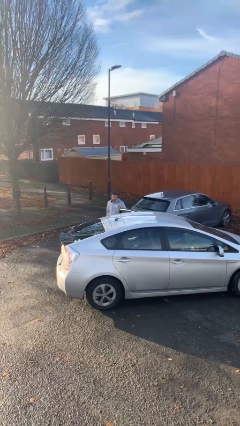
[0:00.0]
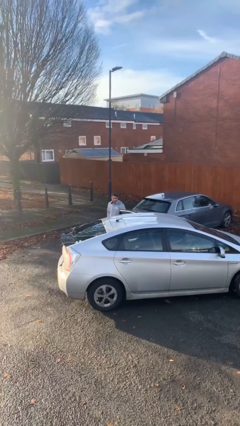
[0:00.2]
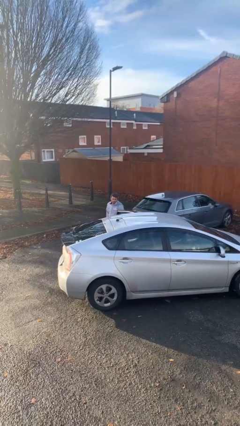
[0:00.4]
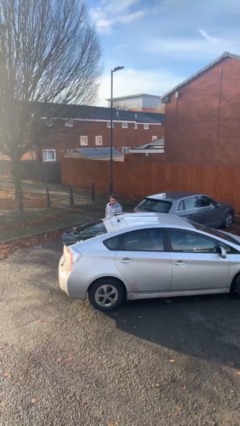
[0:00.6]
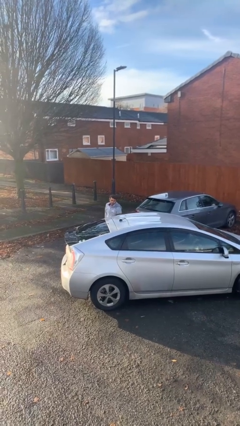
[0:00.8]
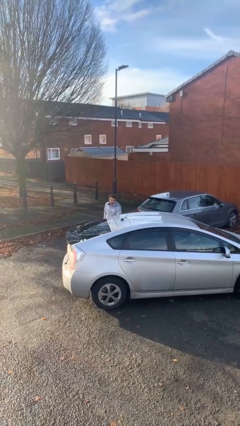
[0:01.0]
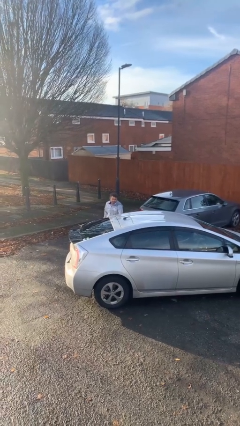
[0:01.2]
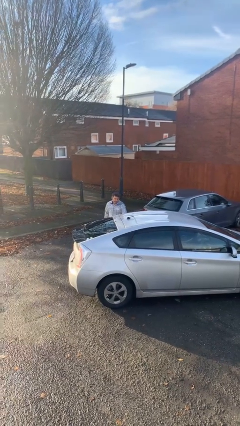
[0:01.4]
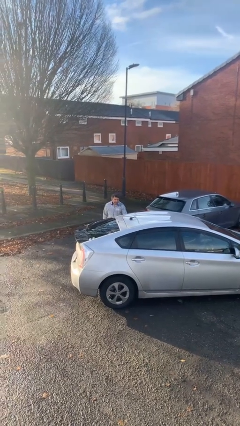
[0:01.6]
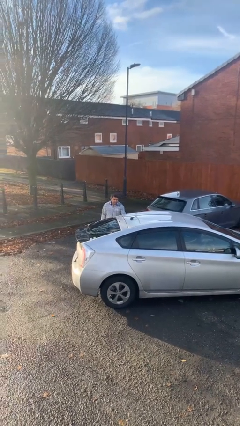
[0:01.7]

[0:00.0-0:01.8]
person closes car door

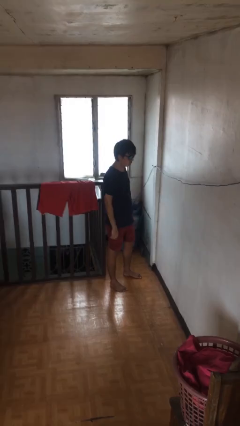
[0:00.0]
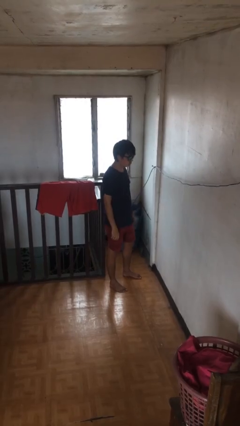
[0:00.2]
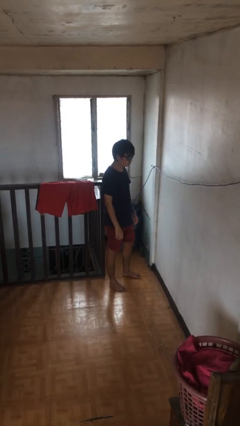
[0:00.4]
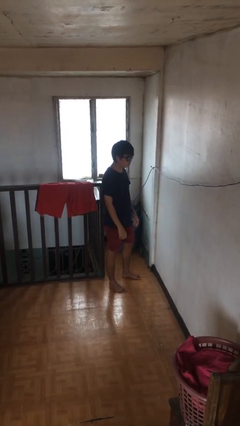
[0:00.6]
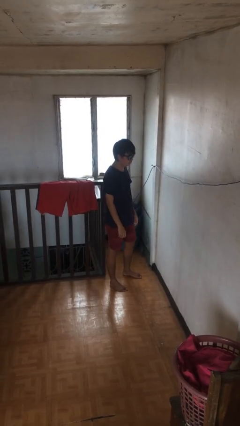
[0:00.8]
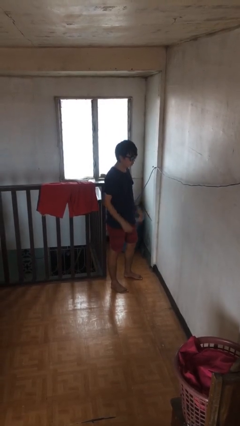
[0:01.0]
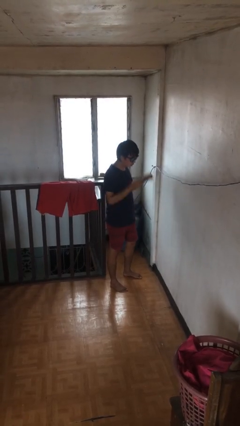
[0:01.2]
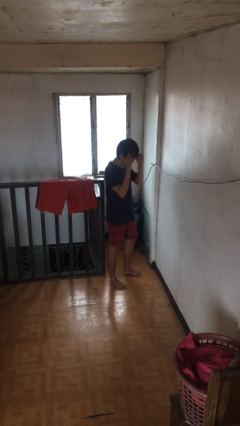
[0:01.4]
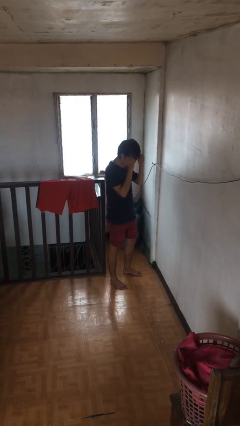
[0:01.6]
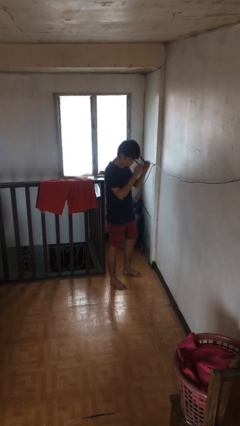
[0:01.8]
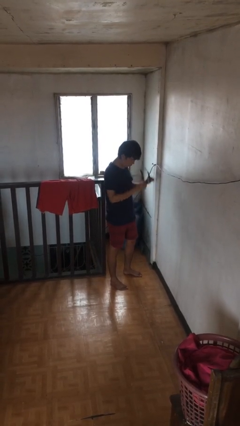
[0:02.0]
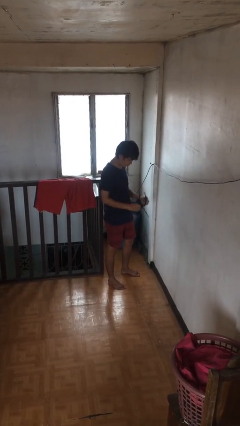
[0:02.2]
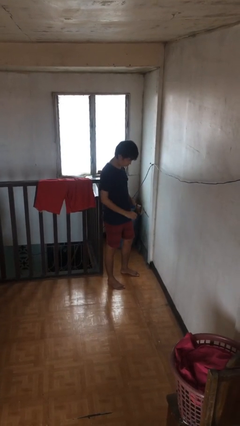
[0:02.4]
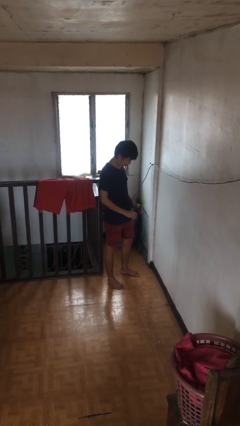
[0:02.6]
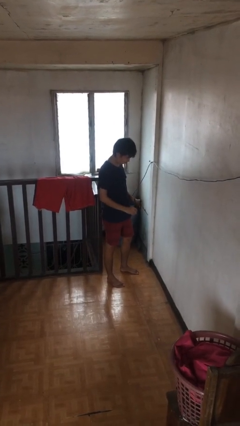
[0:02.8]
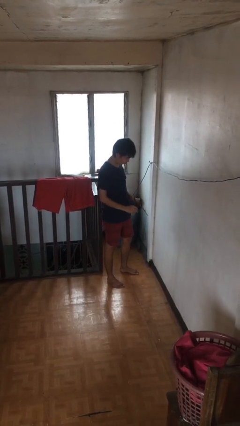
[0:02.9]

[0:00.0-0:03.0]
person takes off sunglasses

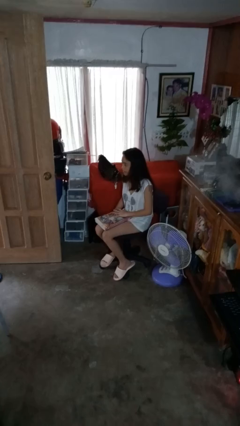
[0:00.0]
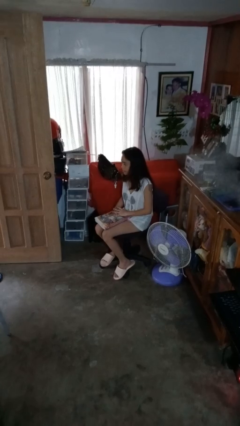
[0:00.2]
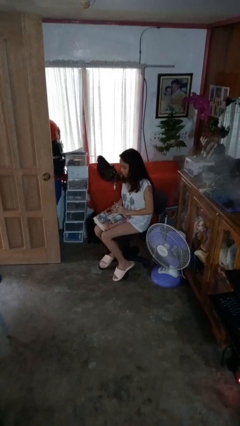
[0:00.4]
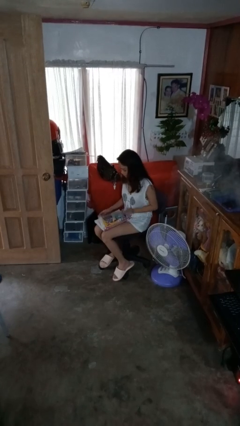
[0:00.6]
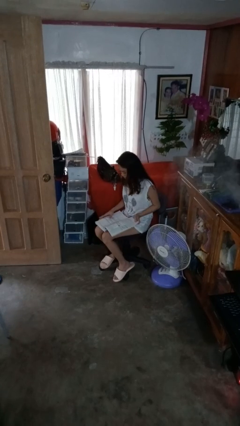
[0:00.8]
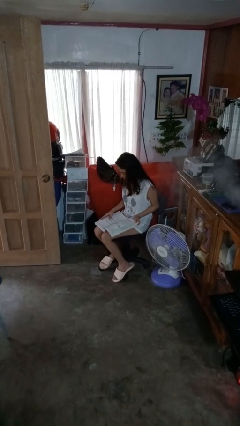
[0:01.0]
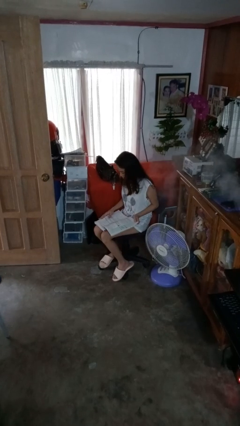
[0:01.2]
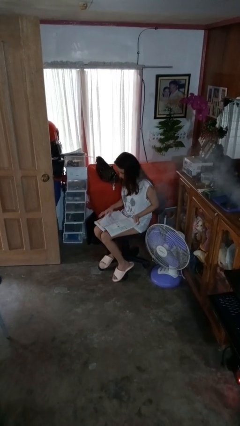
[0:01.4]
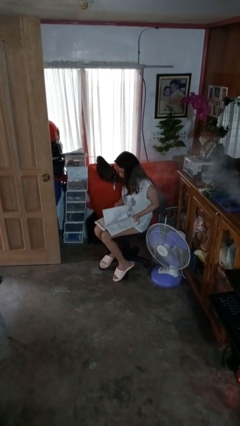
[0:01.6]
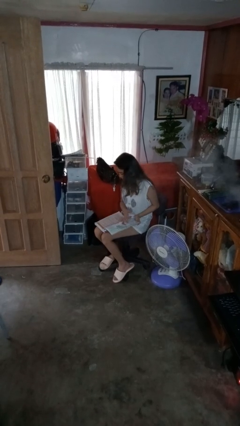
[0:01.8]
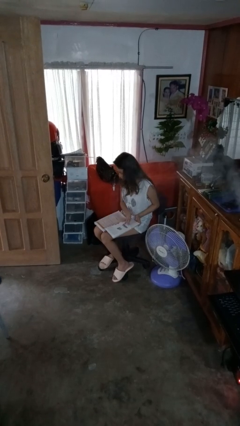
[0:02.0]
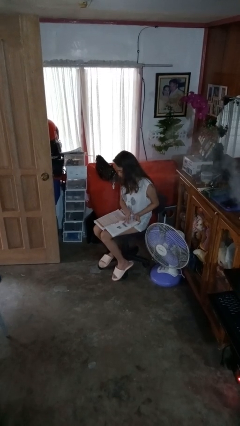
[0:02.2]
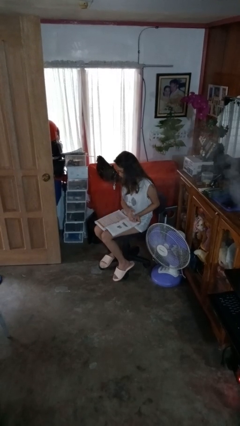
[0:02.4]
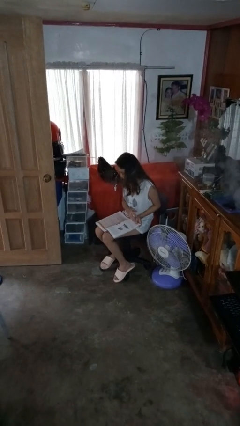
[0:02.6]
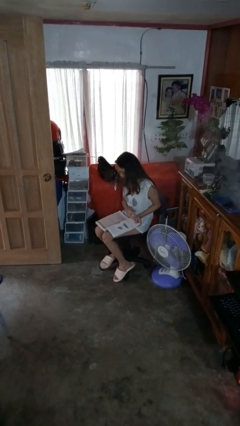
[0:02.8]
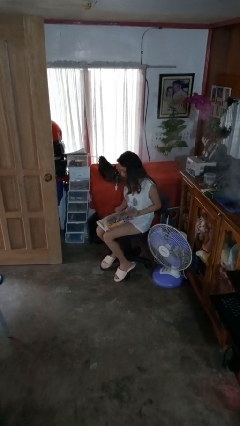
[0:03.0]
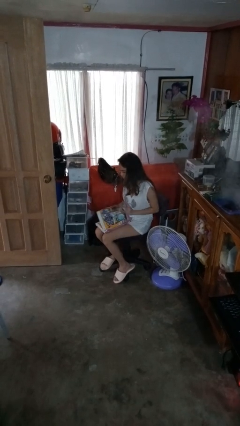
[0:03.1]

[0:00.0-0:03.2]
person reads book

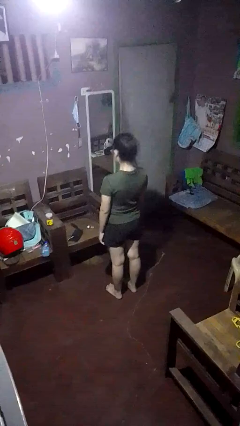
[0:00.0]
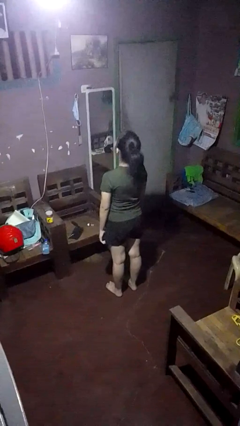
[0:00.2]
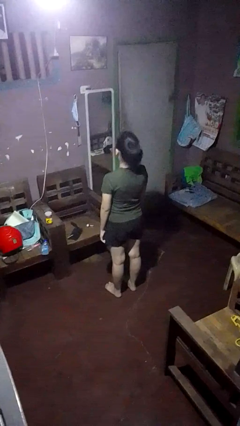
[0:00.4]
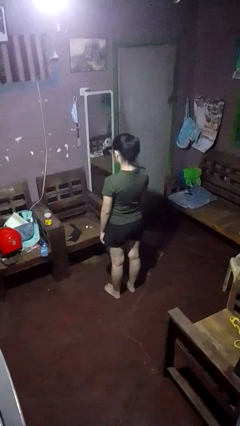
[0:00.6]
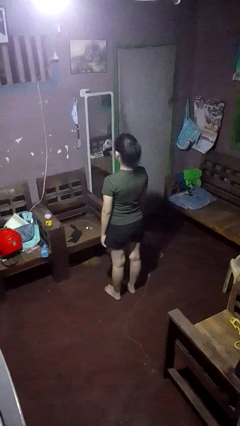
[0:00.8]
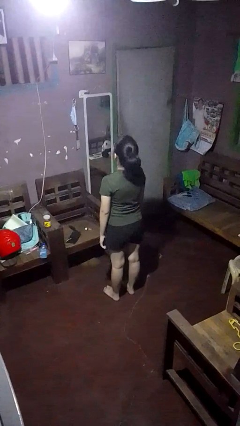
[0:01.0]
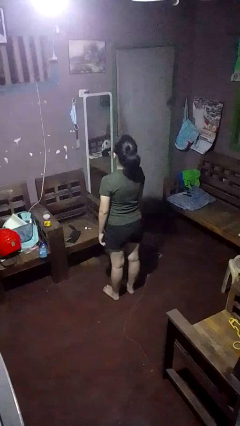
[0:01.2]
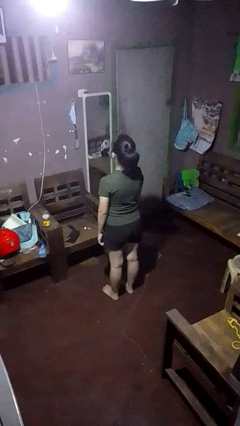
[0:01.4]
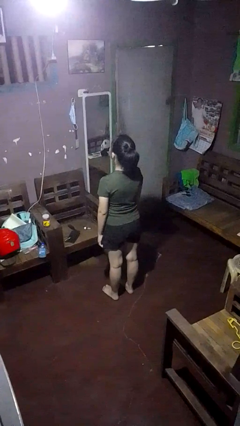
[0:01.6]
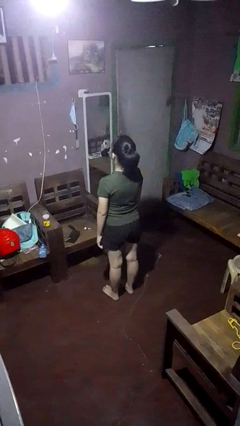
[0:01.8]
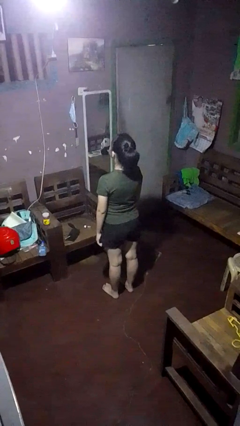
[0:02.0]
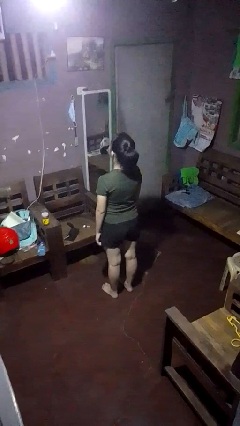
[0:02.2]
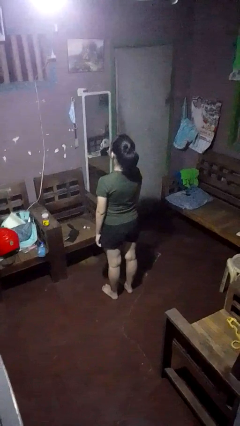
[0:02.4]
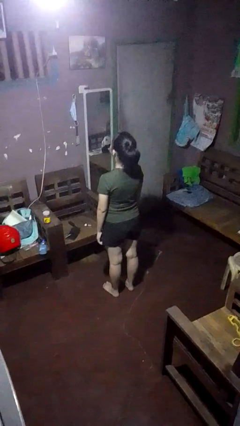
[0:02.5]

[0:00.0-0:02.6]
person nods head

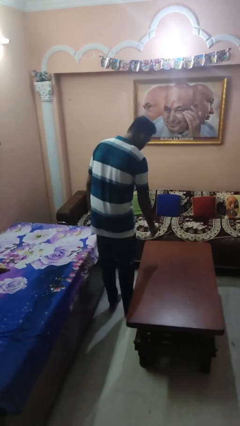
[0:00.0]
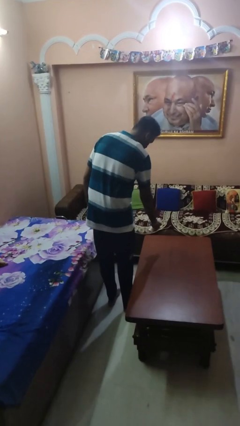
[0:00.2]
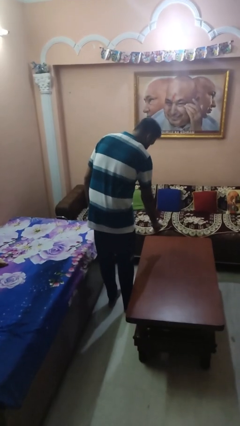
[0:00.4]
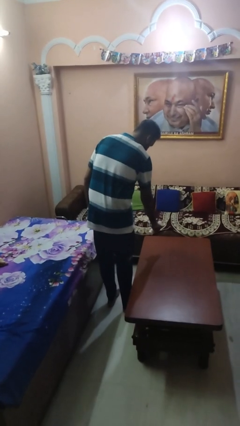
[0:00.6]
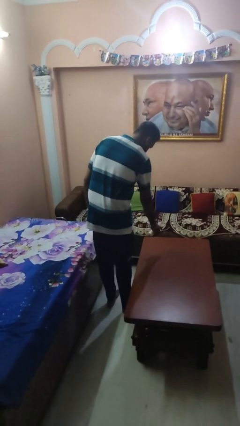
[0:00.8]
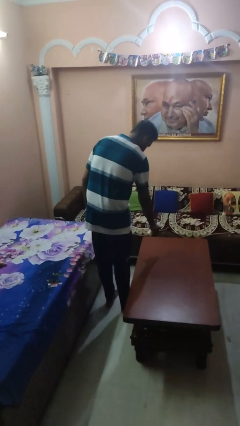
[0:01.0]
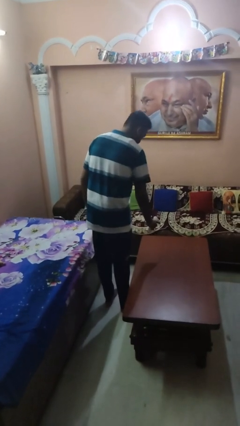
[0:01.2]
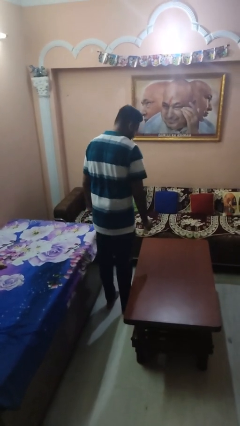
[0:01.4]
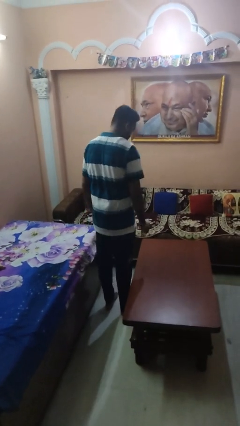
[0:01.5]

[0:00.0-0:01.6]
person sprays from bottle

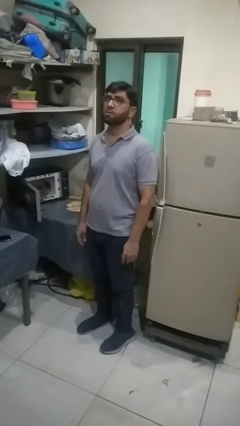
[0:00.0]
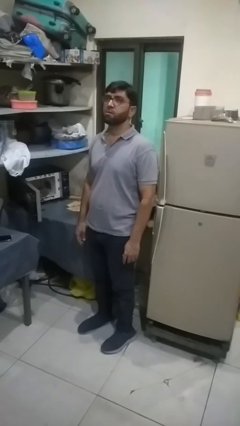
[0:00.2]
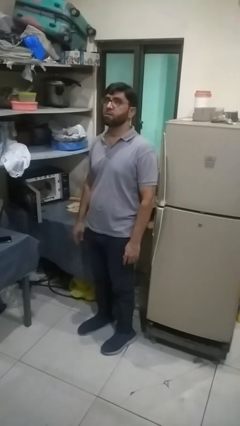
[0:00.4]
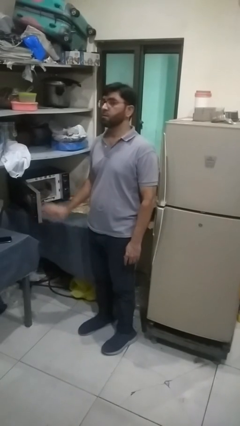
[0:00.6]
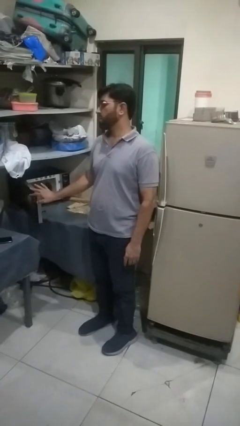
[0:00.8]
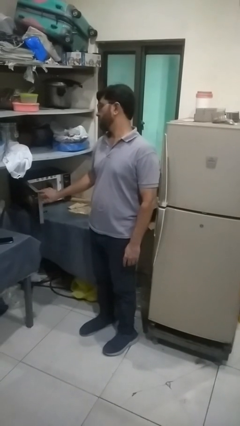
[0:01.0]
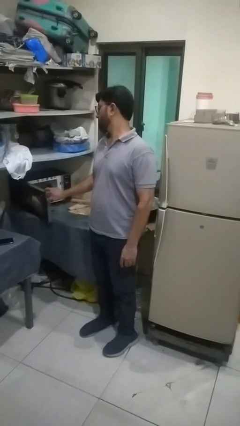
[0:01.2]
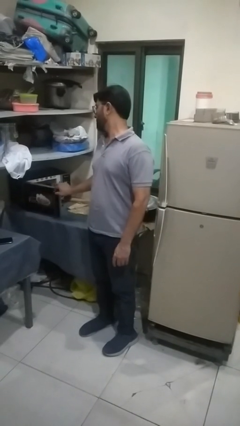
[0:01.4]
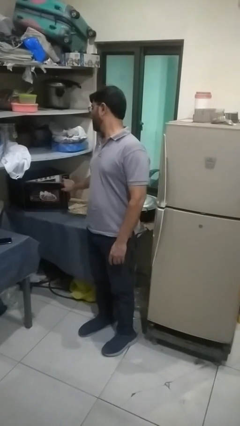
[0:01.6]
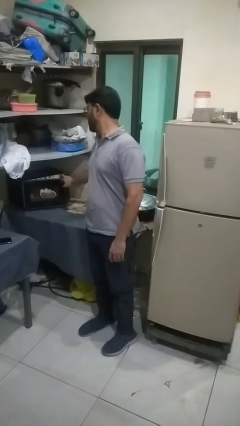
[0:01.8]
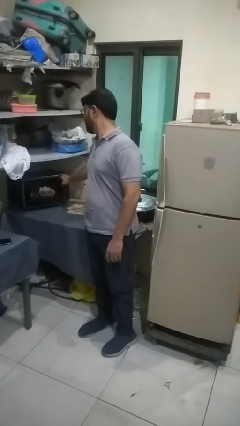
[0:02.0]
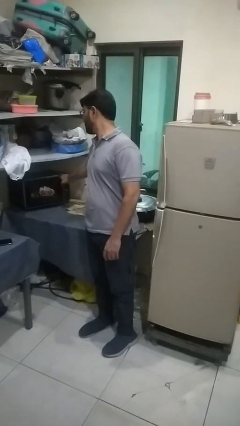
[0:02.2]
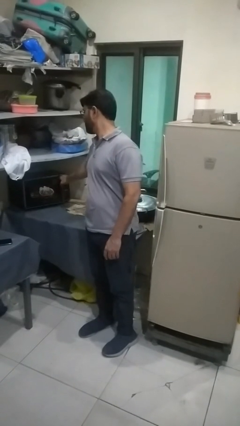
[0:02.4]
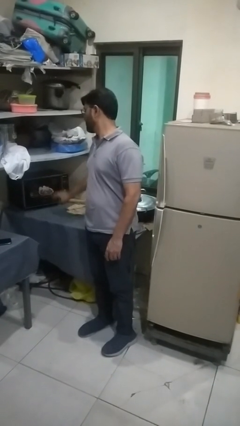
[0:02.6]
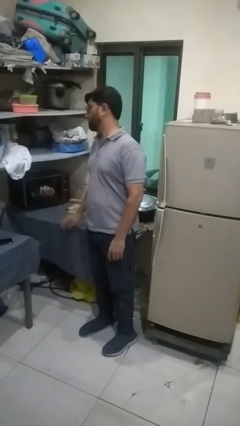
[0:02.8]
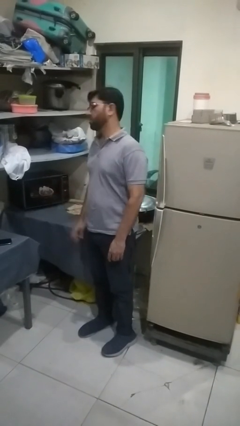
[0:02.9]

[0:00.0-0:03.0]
person closes oven door

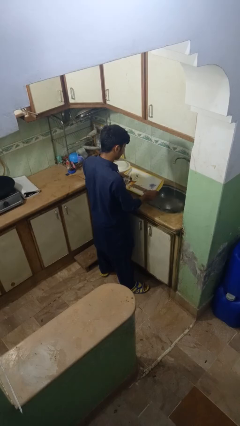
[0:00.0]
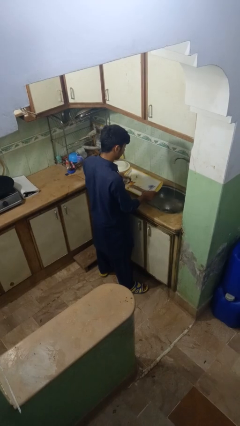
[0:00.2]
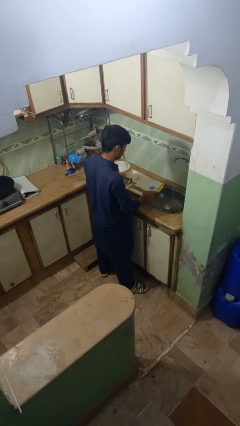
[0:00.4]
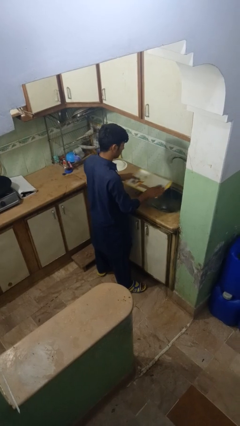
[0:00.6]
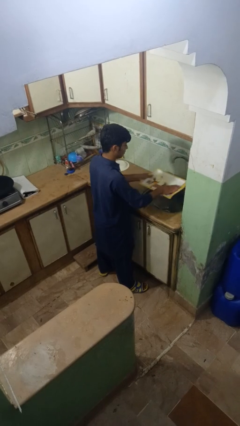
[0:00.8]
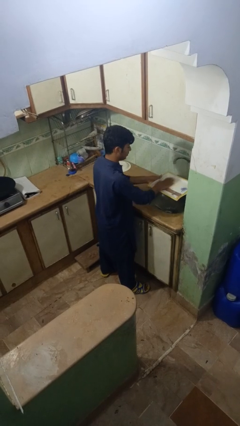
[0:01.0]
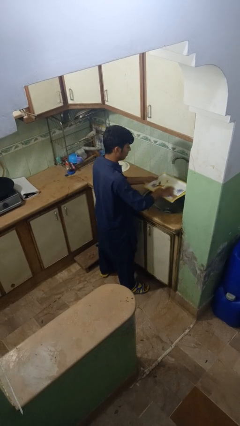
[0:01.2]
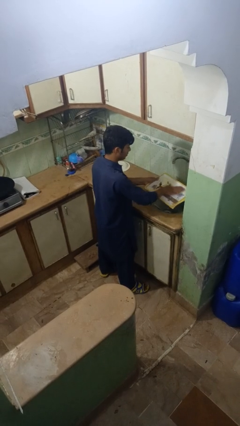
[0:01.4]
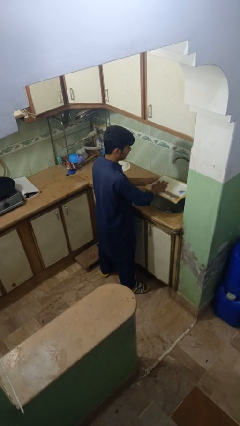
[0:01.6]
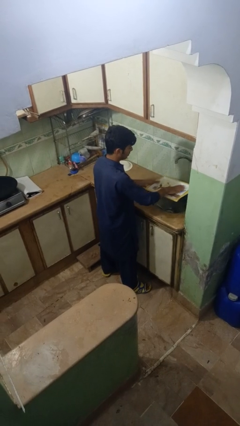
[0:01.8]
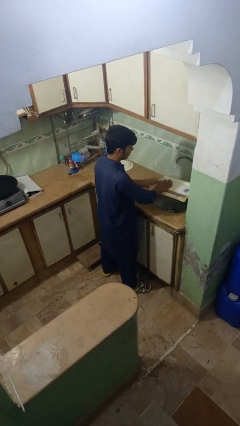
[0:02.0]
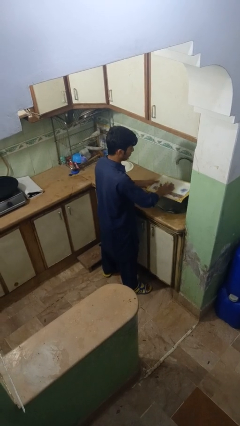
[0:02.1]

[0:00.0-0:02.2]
person washes dish
